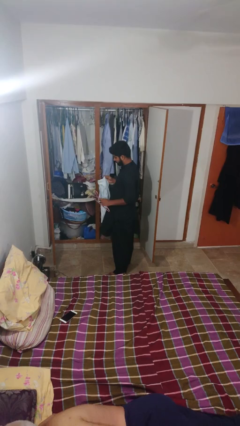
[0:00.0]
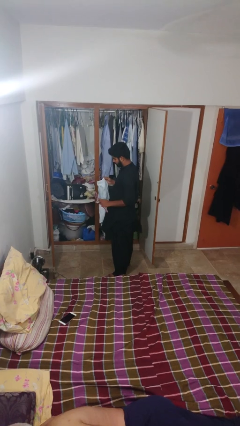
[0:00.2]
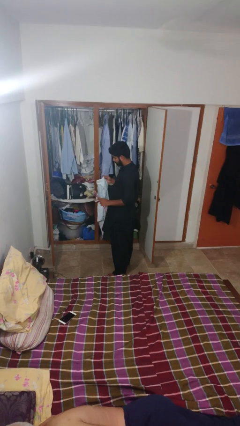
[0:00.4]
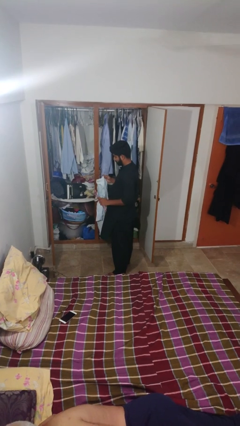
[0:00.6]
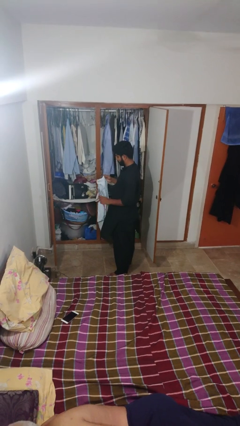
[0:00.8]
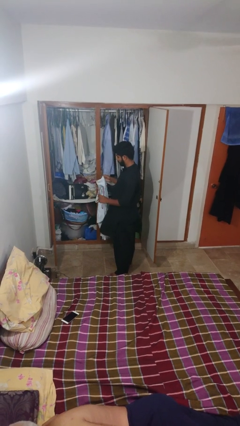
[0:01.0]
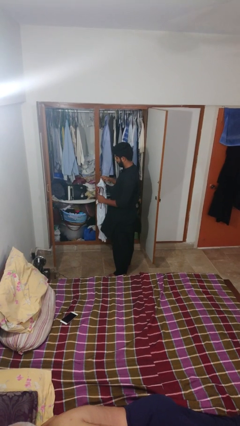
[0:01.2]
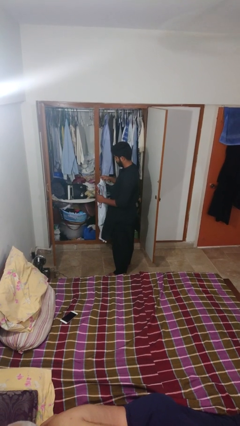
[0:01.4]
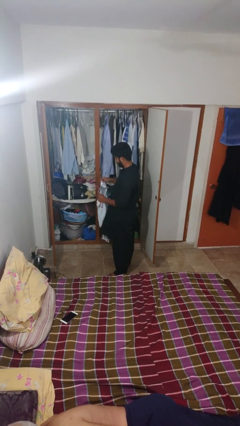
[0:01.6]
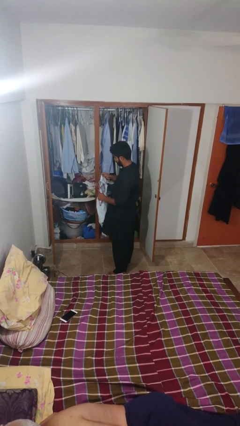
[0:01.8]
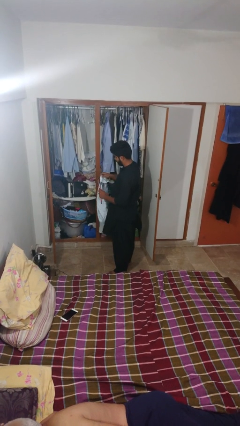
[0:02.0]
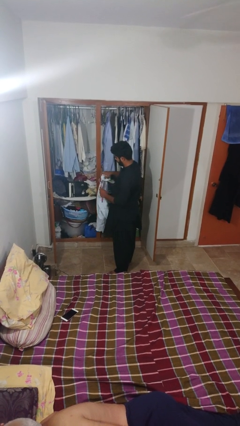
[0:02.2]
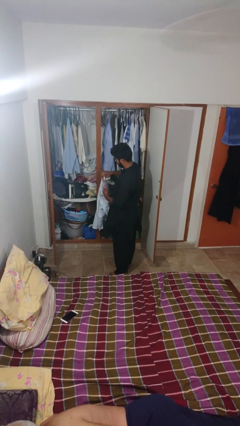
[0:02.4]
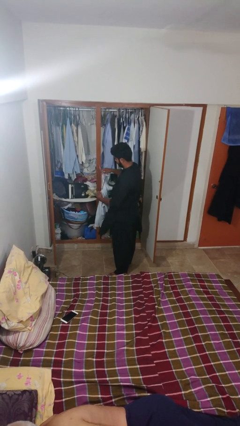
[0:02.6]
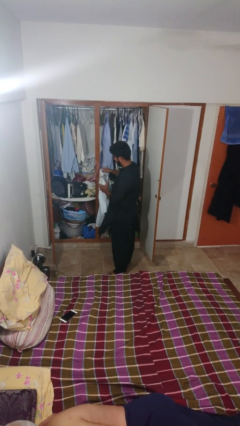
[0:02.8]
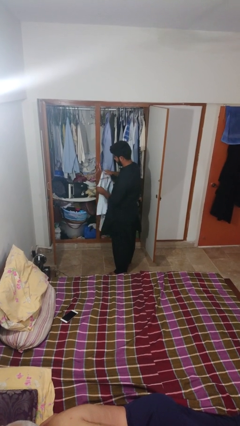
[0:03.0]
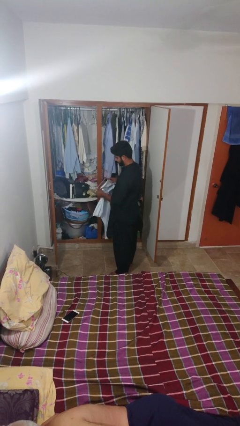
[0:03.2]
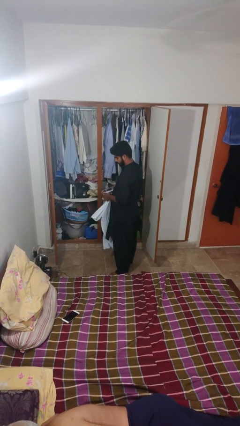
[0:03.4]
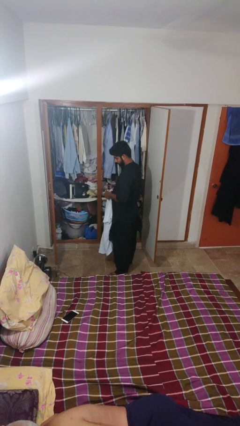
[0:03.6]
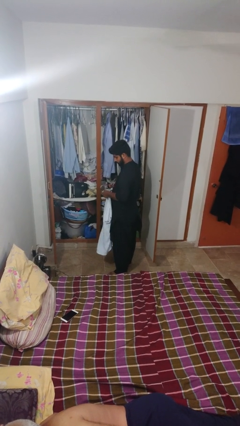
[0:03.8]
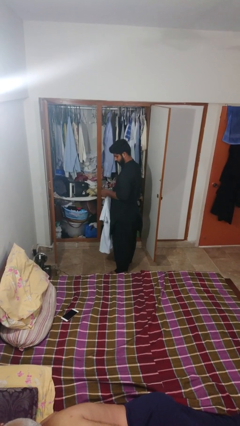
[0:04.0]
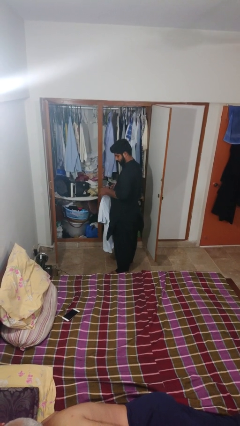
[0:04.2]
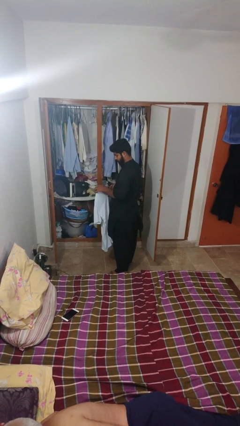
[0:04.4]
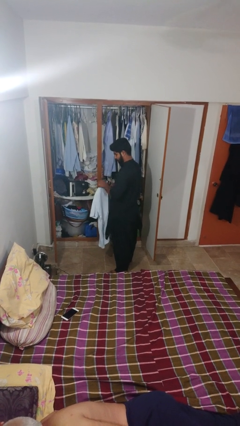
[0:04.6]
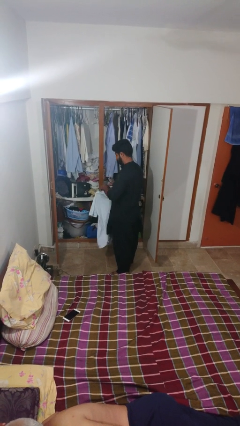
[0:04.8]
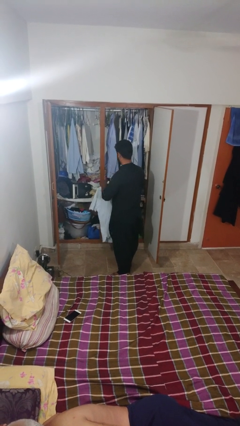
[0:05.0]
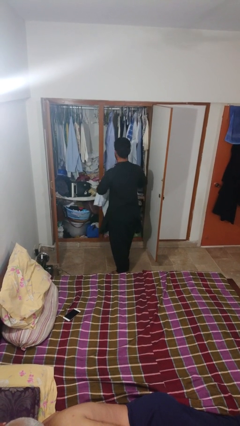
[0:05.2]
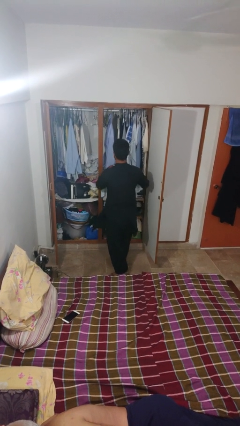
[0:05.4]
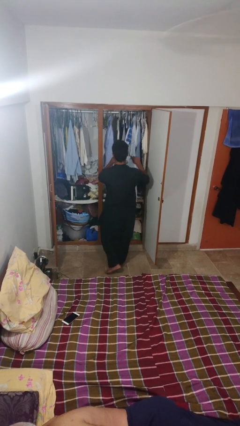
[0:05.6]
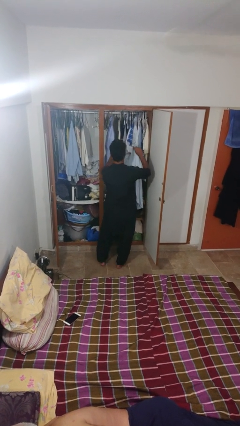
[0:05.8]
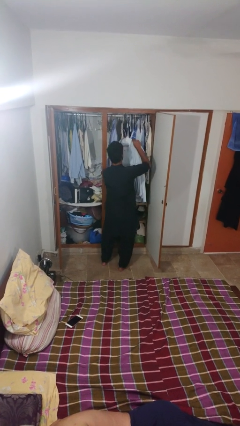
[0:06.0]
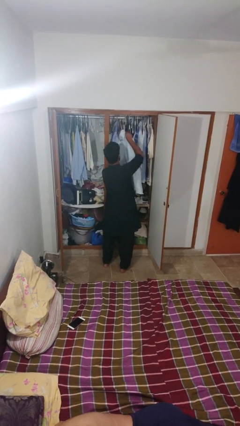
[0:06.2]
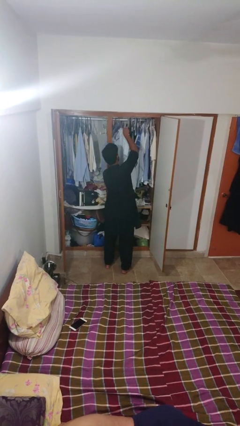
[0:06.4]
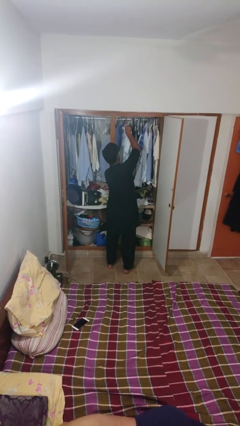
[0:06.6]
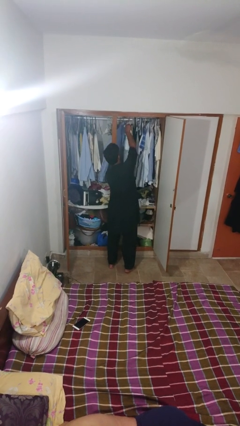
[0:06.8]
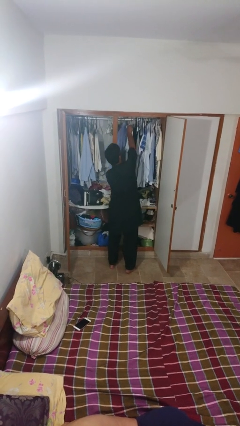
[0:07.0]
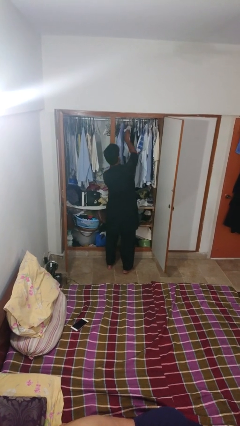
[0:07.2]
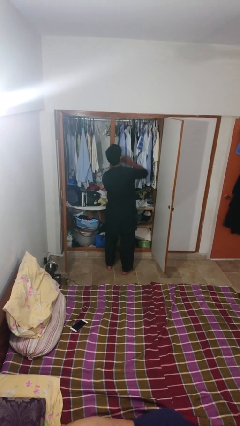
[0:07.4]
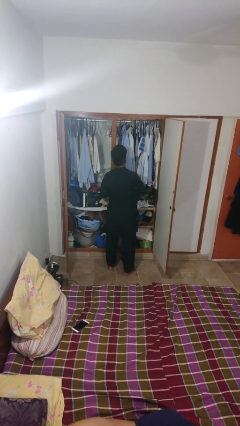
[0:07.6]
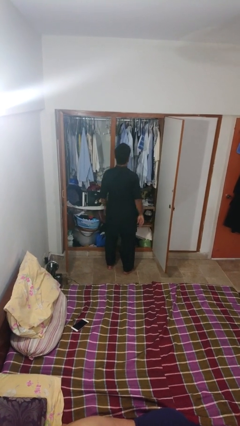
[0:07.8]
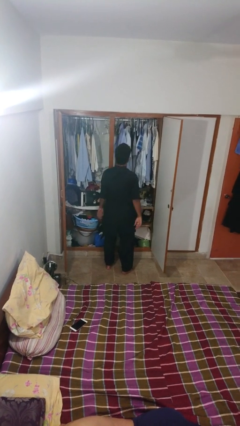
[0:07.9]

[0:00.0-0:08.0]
person puts clothes into closet

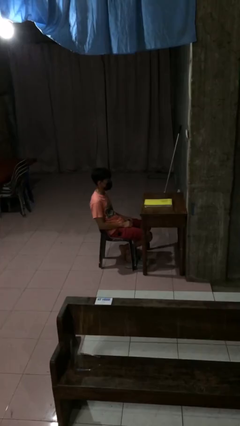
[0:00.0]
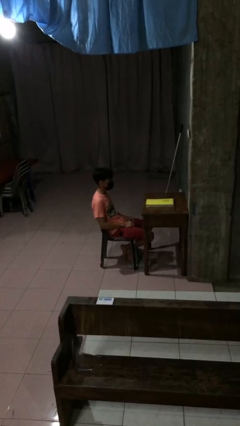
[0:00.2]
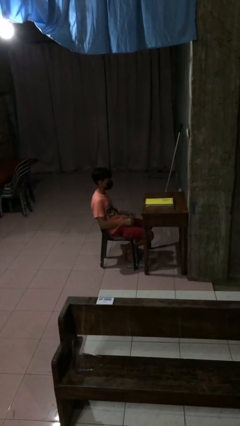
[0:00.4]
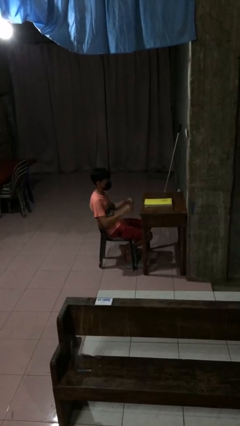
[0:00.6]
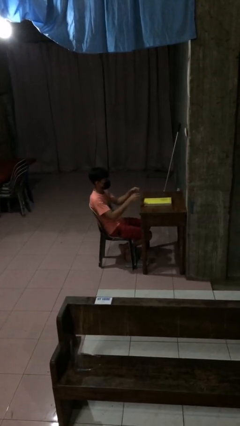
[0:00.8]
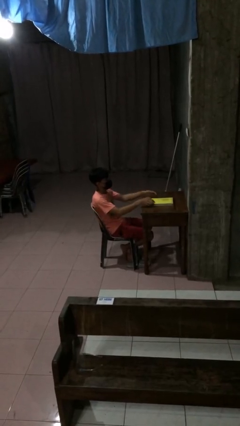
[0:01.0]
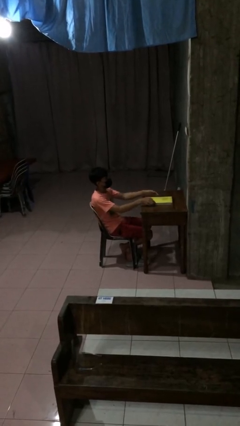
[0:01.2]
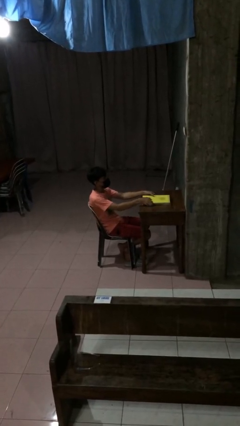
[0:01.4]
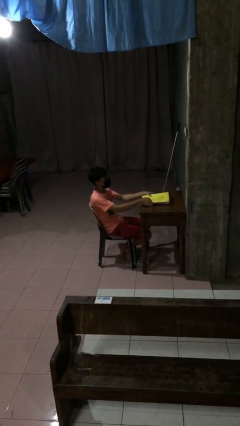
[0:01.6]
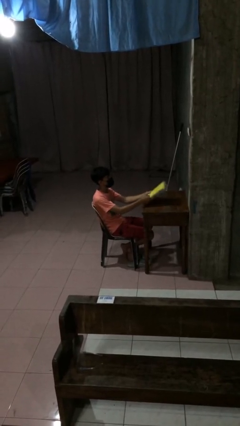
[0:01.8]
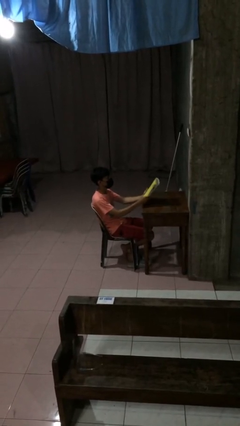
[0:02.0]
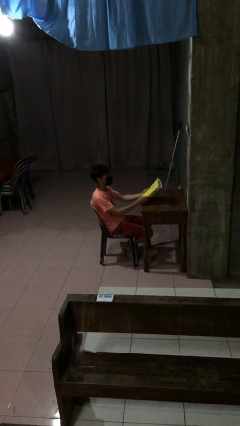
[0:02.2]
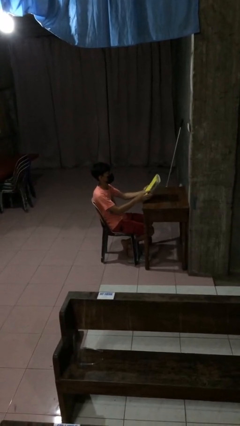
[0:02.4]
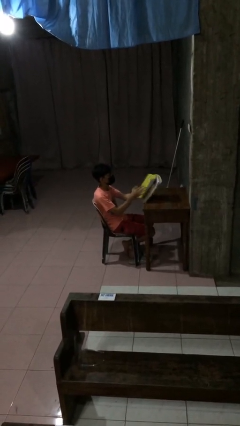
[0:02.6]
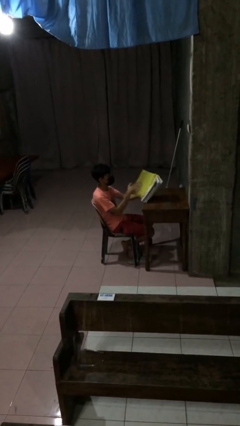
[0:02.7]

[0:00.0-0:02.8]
person picks up object from table

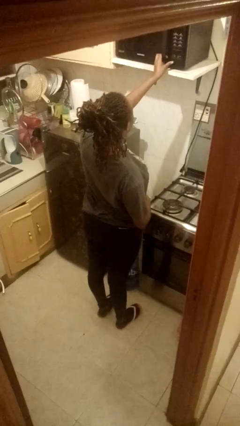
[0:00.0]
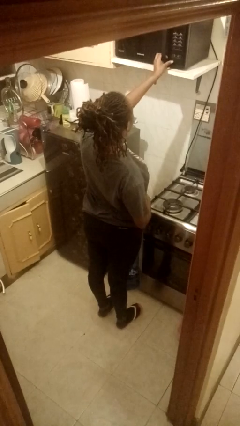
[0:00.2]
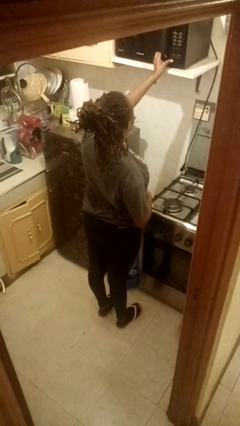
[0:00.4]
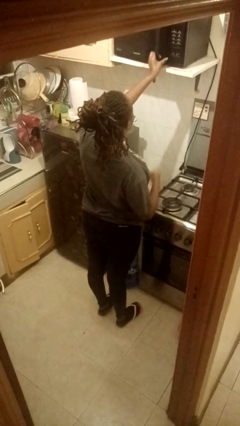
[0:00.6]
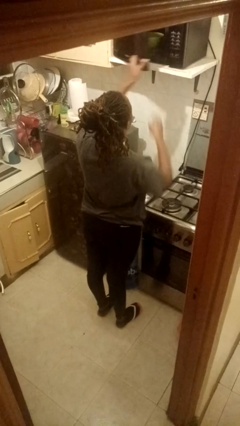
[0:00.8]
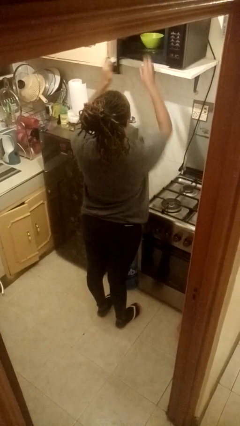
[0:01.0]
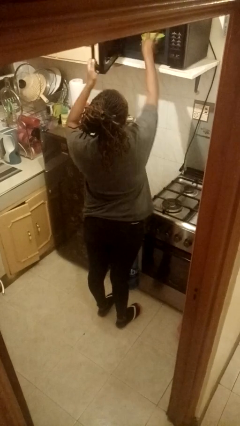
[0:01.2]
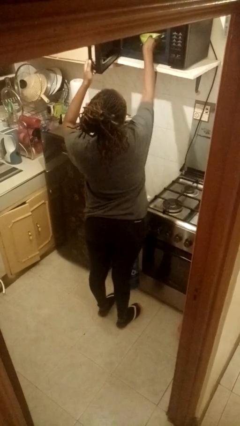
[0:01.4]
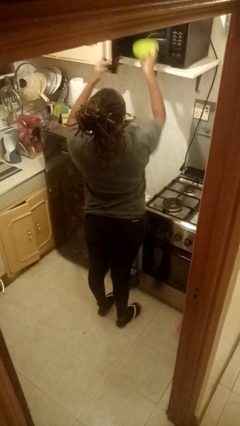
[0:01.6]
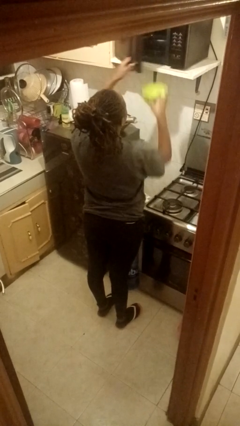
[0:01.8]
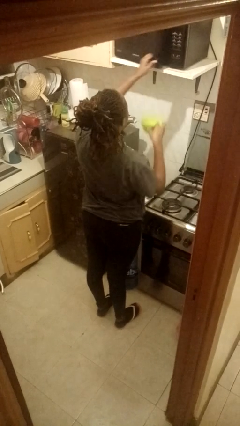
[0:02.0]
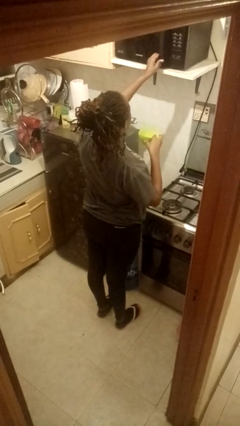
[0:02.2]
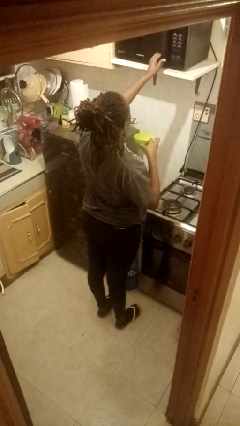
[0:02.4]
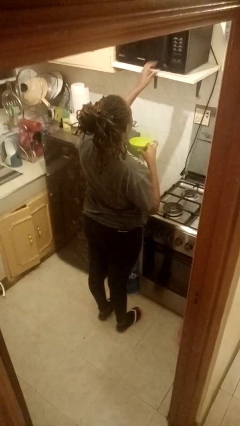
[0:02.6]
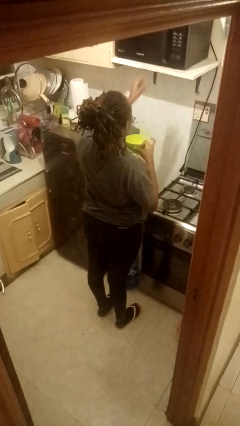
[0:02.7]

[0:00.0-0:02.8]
person takes object from microwave

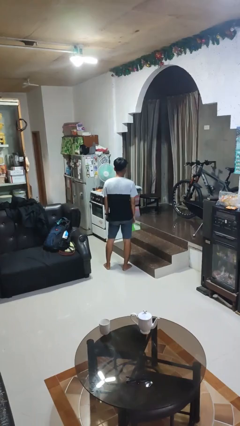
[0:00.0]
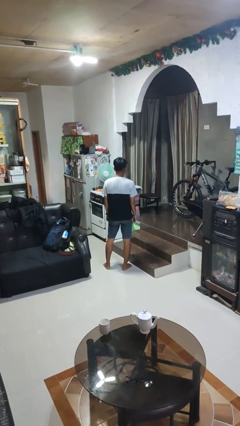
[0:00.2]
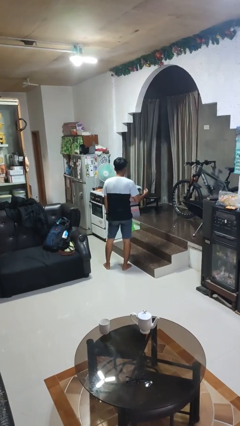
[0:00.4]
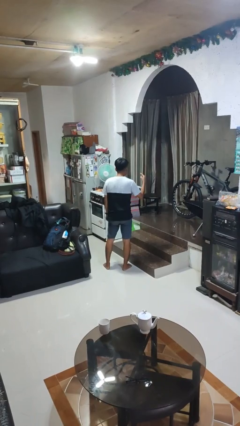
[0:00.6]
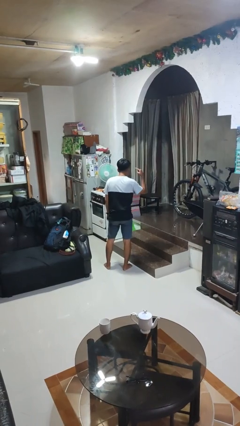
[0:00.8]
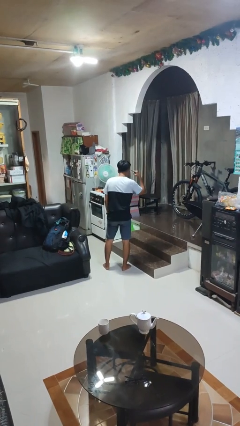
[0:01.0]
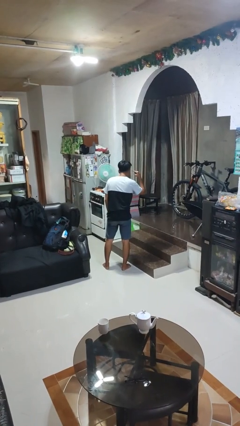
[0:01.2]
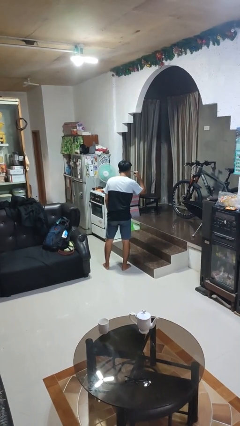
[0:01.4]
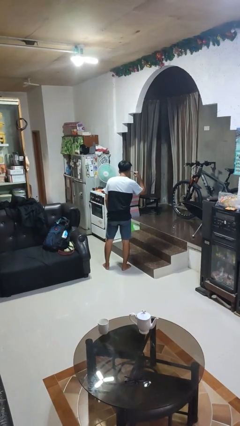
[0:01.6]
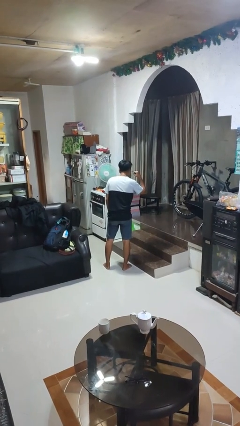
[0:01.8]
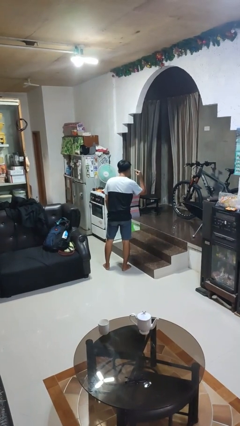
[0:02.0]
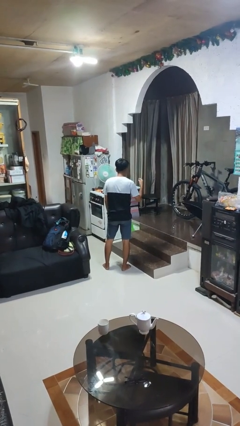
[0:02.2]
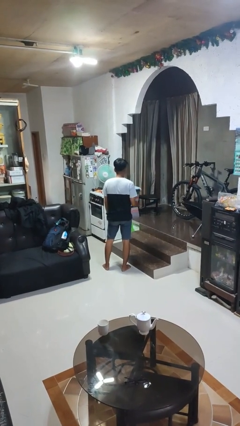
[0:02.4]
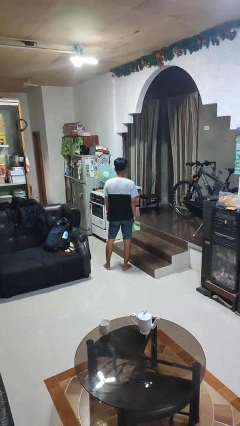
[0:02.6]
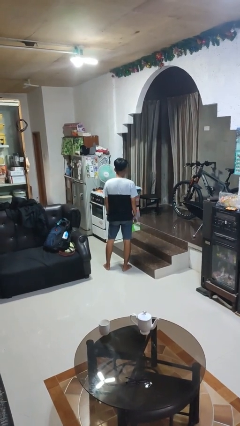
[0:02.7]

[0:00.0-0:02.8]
person gestures listen closely

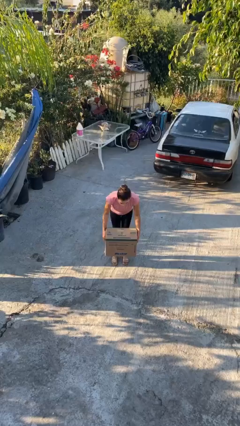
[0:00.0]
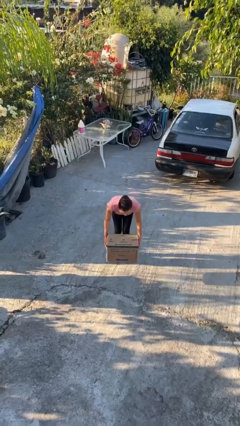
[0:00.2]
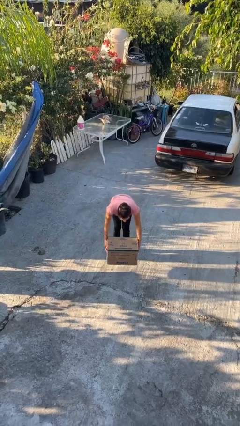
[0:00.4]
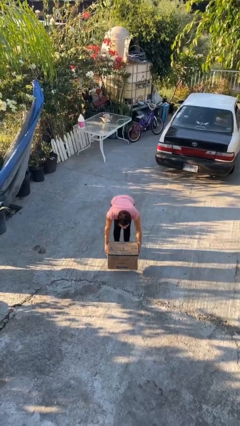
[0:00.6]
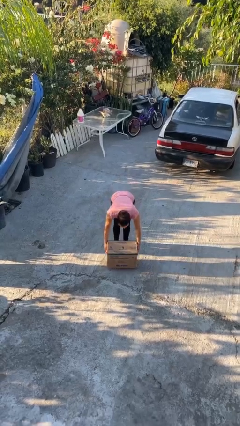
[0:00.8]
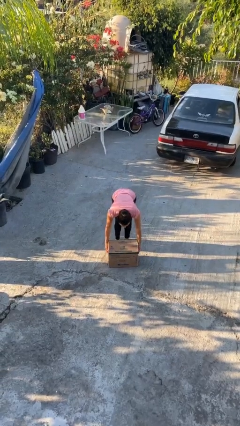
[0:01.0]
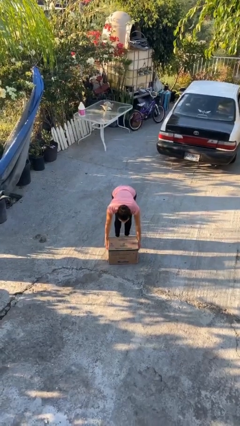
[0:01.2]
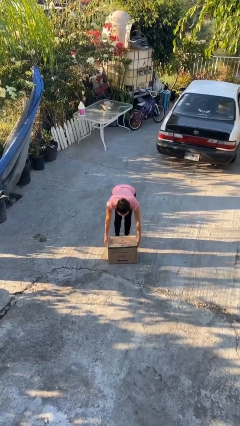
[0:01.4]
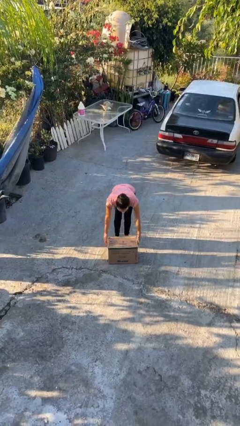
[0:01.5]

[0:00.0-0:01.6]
person puts down object on floor

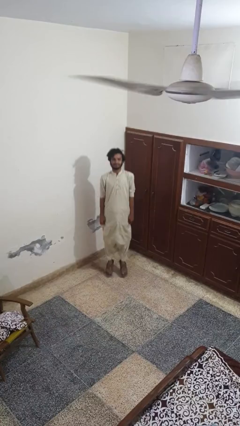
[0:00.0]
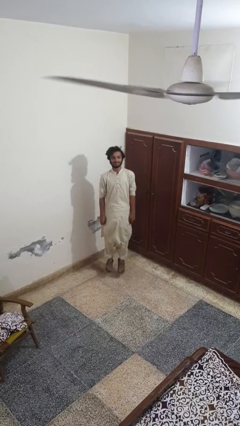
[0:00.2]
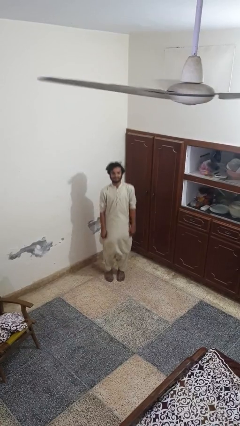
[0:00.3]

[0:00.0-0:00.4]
person jumps
